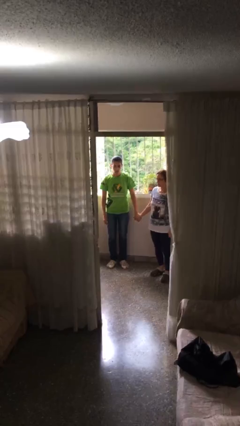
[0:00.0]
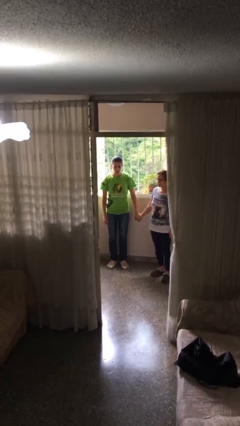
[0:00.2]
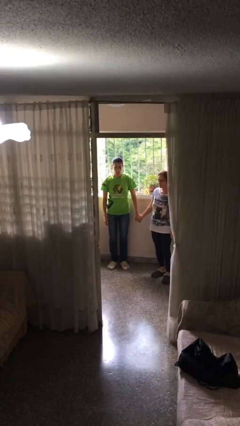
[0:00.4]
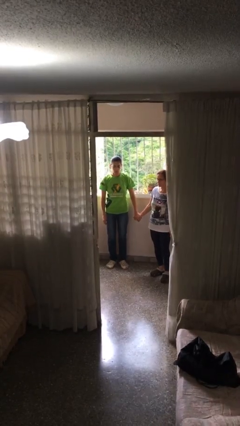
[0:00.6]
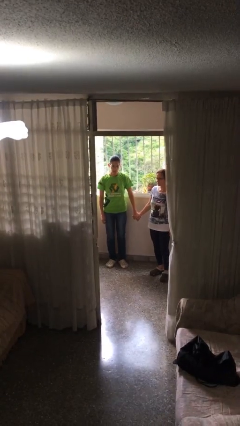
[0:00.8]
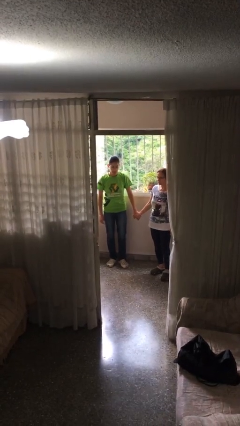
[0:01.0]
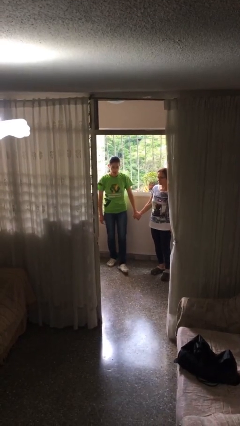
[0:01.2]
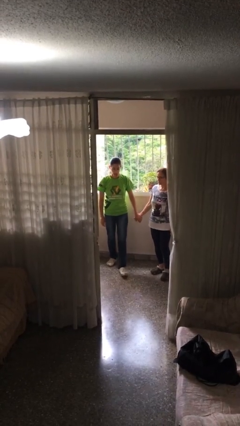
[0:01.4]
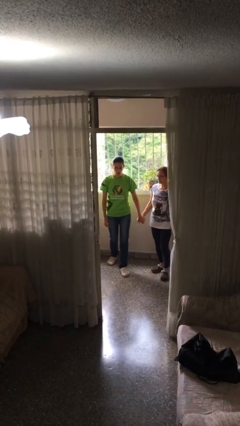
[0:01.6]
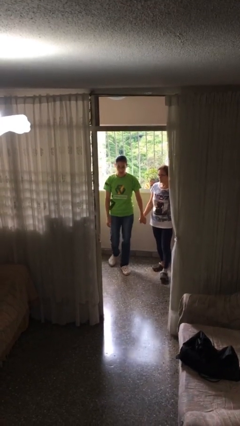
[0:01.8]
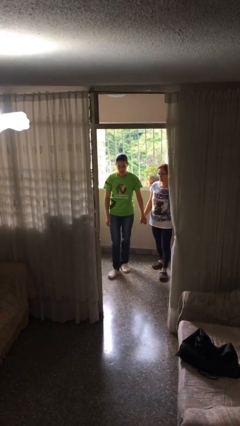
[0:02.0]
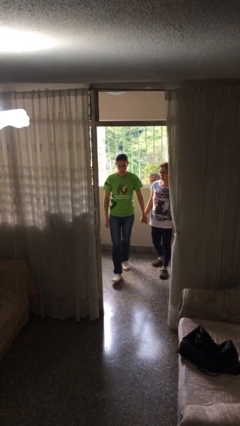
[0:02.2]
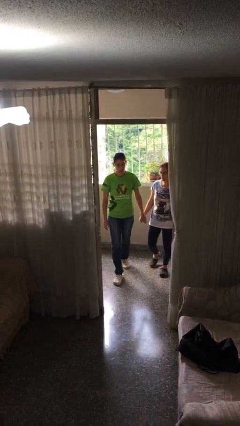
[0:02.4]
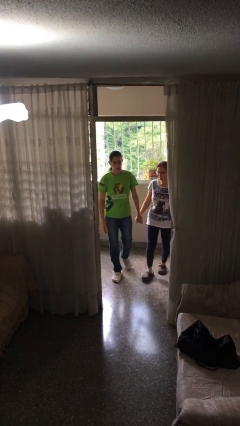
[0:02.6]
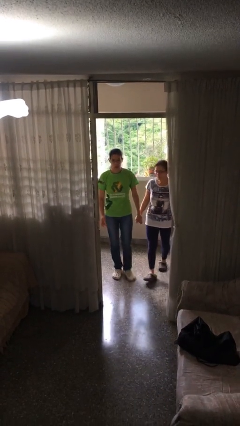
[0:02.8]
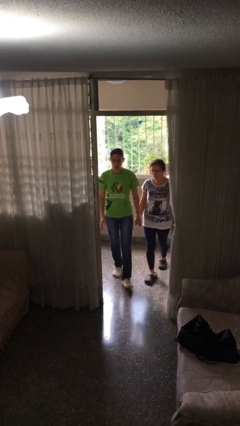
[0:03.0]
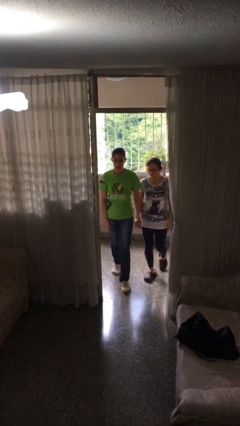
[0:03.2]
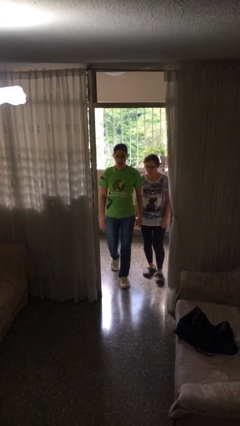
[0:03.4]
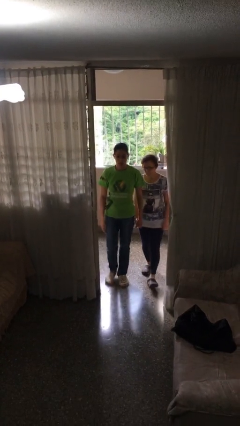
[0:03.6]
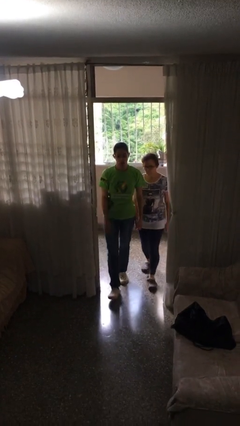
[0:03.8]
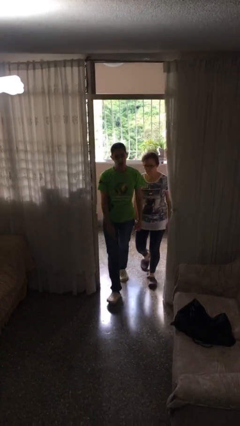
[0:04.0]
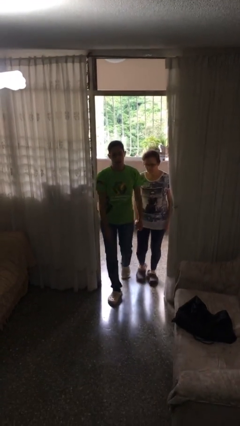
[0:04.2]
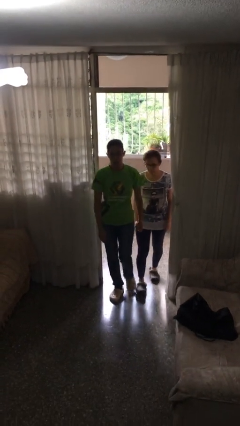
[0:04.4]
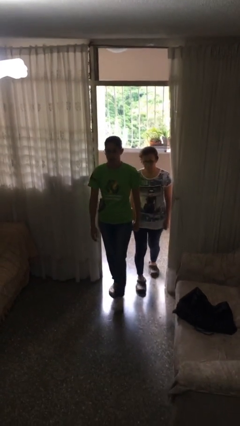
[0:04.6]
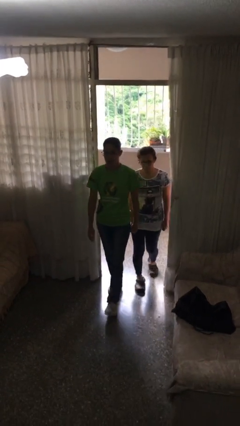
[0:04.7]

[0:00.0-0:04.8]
person holds hand

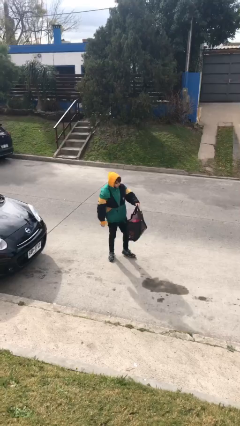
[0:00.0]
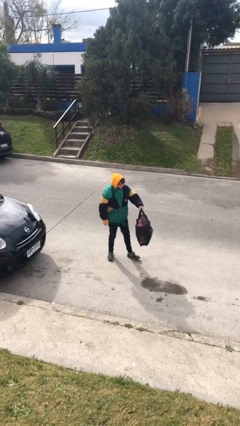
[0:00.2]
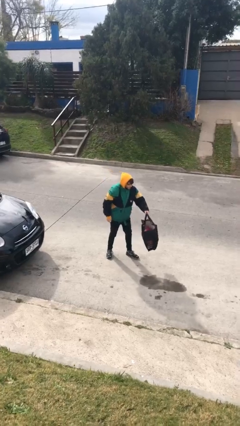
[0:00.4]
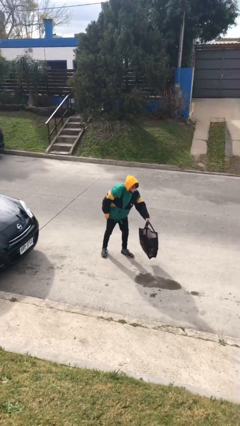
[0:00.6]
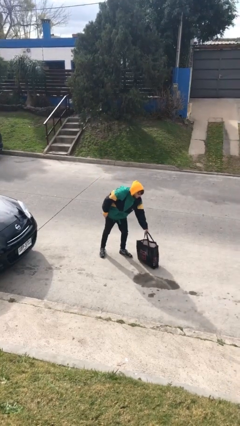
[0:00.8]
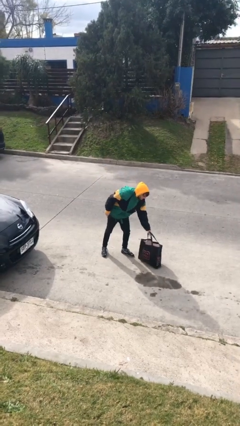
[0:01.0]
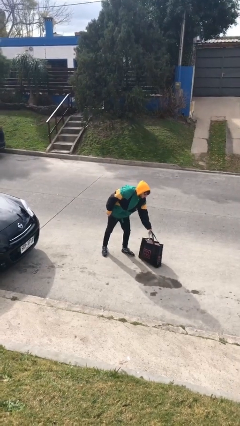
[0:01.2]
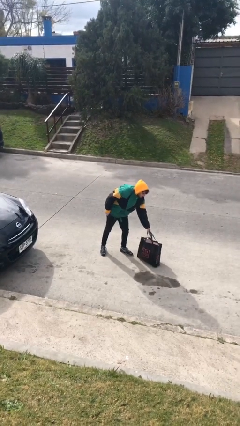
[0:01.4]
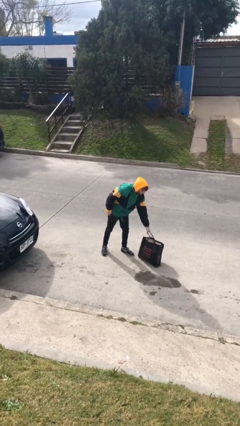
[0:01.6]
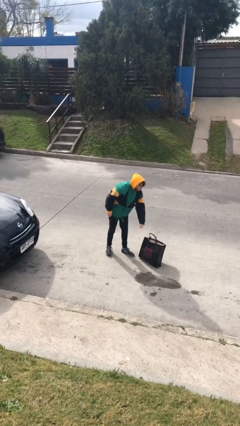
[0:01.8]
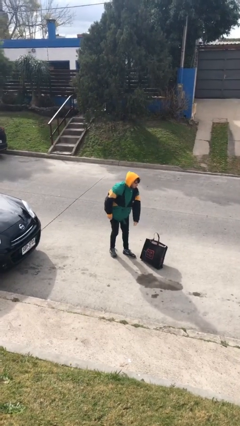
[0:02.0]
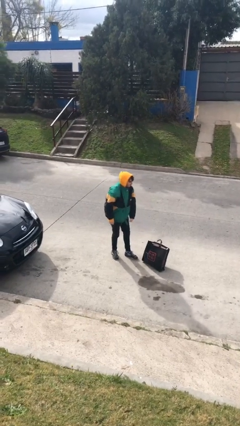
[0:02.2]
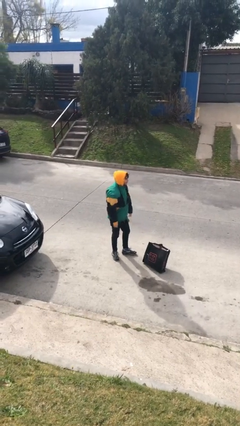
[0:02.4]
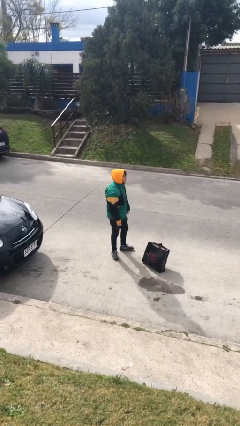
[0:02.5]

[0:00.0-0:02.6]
person puts down object on floor

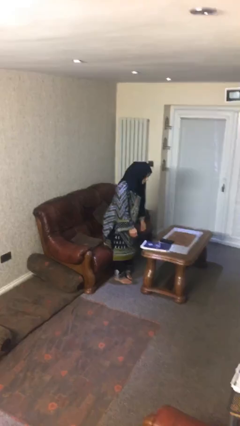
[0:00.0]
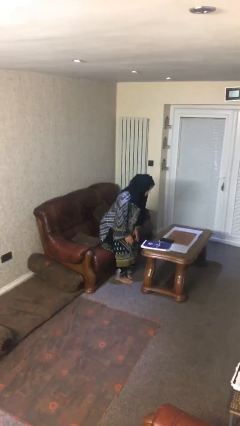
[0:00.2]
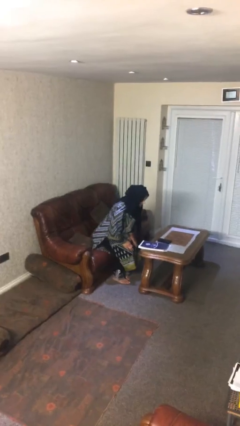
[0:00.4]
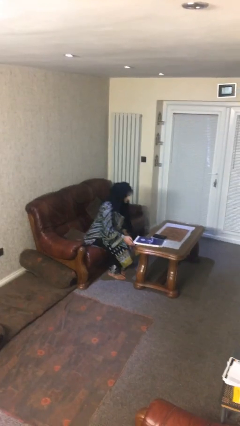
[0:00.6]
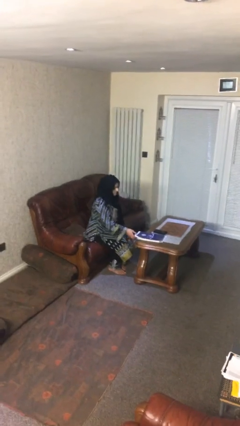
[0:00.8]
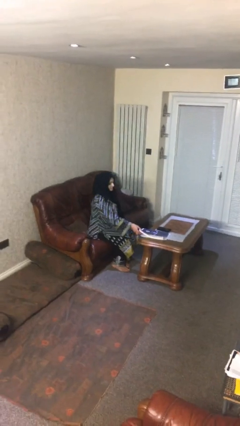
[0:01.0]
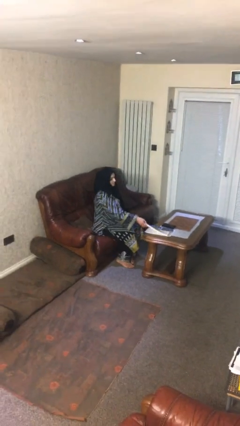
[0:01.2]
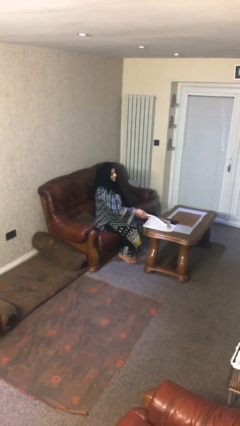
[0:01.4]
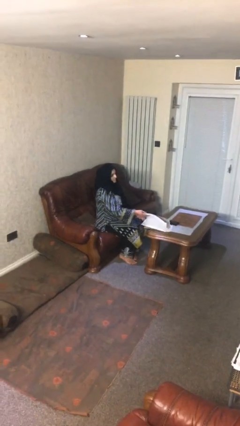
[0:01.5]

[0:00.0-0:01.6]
person sits down

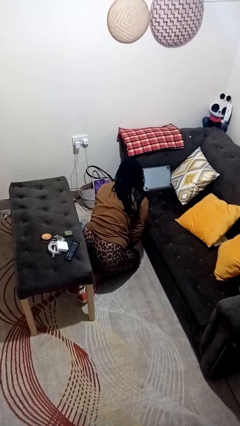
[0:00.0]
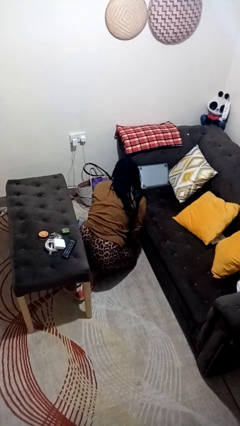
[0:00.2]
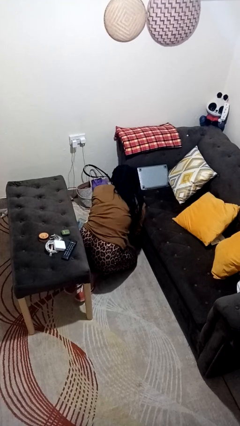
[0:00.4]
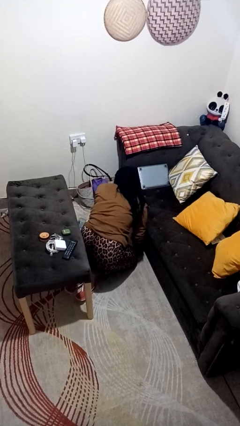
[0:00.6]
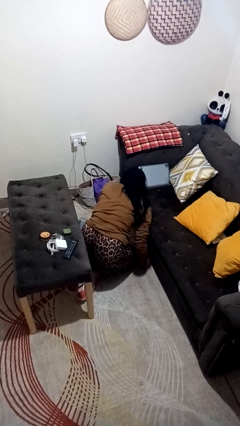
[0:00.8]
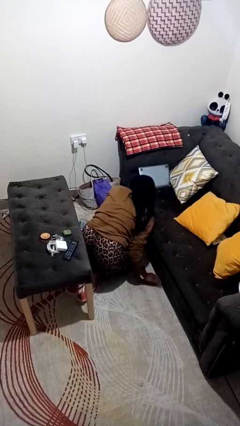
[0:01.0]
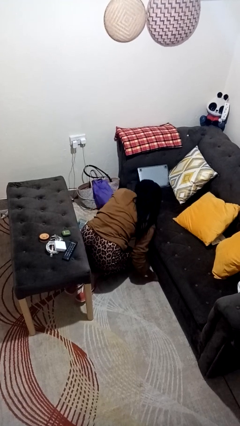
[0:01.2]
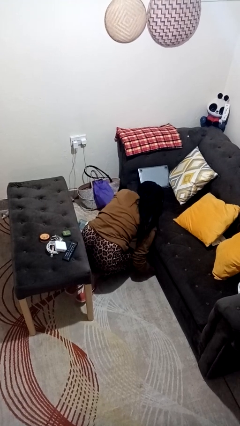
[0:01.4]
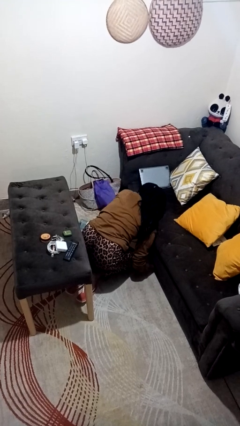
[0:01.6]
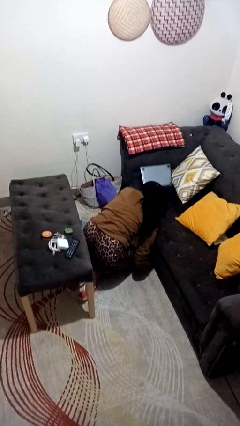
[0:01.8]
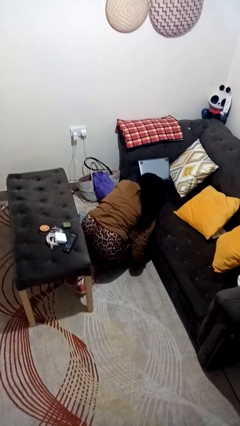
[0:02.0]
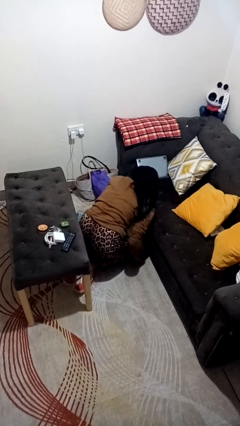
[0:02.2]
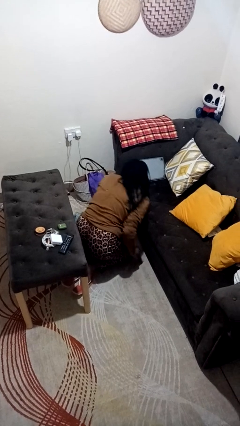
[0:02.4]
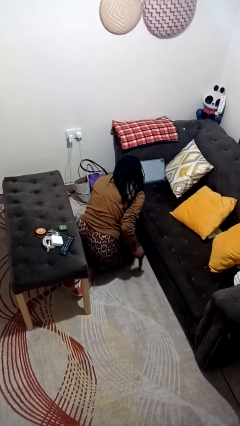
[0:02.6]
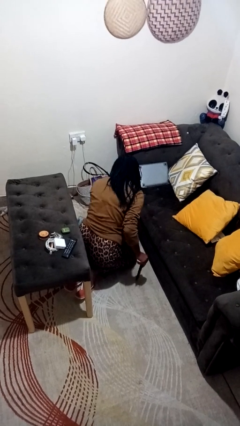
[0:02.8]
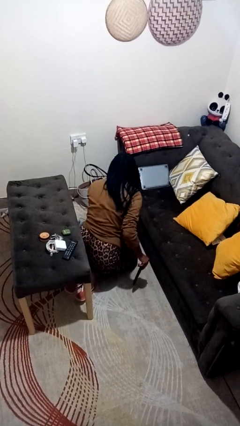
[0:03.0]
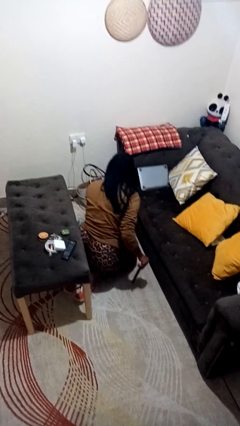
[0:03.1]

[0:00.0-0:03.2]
person searches under couch

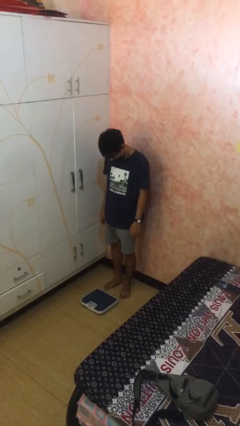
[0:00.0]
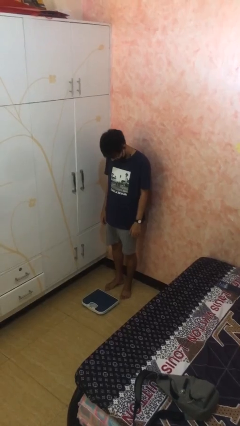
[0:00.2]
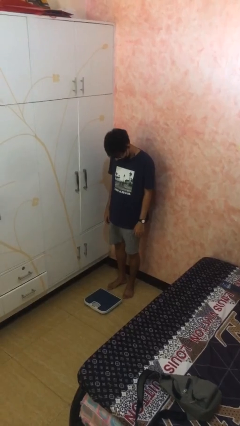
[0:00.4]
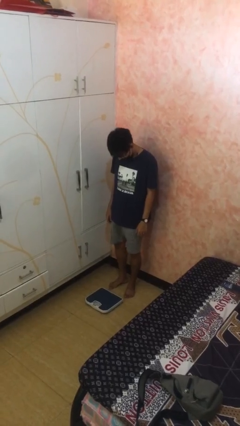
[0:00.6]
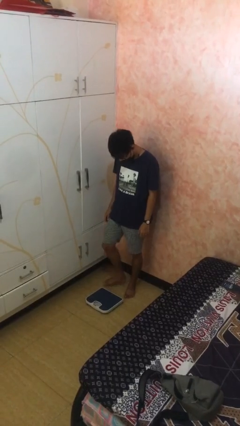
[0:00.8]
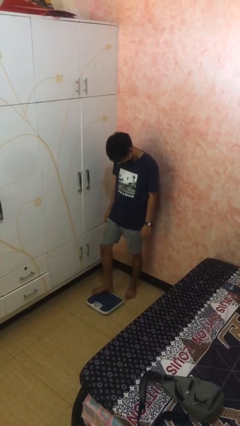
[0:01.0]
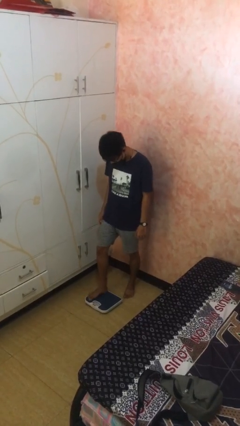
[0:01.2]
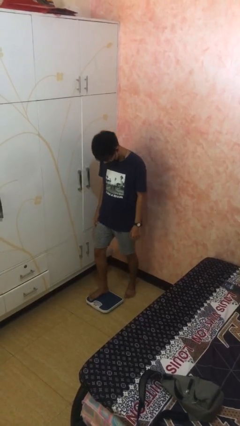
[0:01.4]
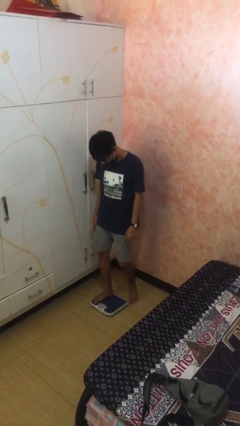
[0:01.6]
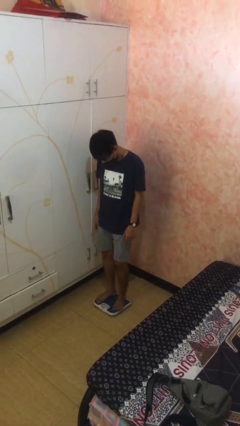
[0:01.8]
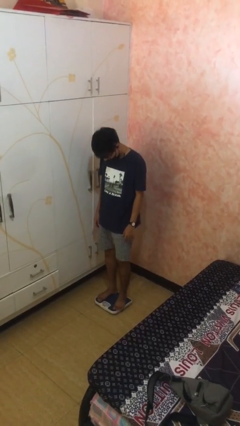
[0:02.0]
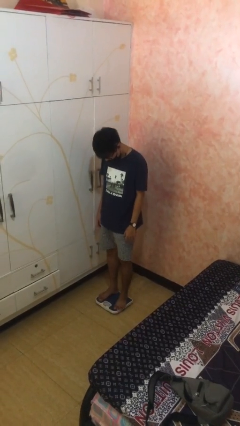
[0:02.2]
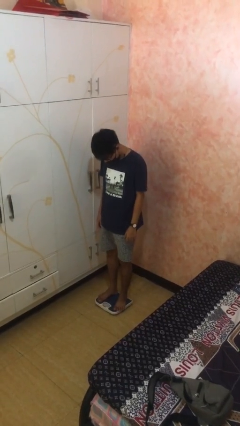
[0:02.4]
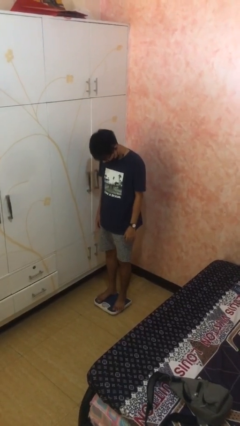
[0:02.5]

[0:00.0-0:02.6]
person uses bodyweight scale

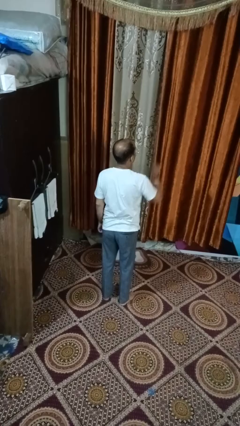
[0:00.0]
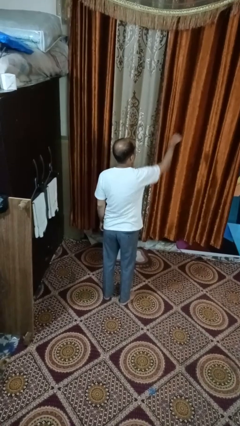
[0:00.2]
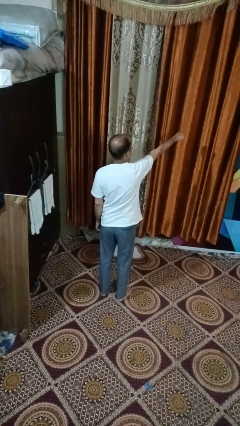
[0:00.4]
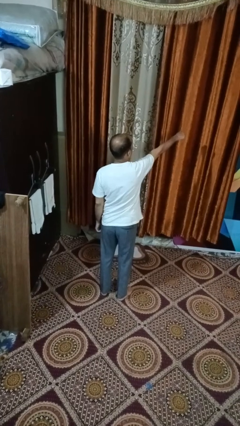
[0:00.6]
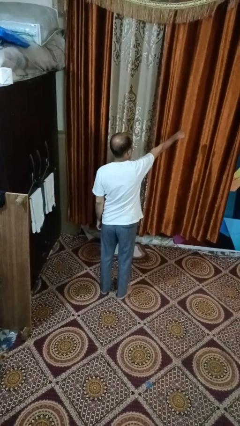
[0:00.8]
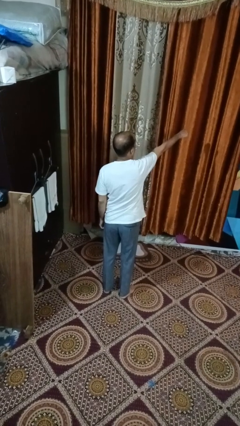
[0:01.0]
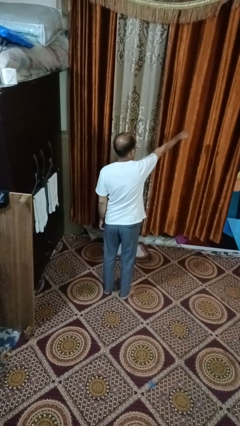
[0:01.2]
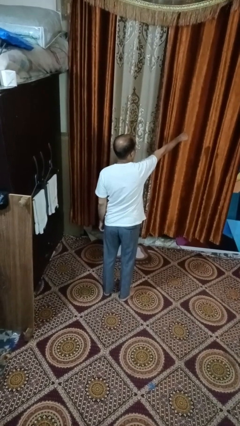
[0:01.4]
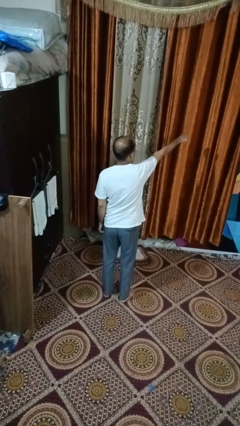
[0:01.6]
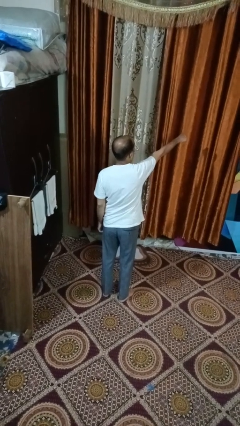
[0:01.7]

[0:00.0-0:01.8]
person punches
